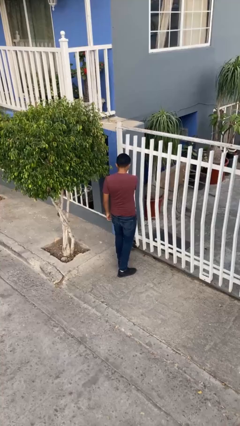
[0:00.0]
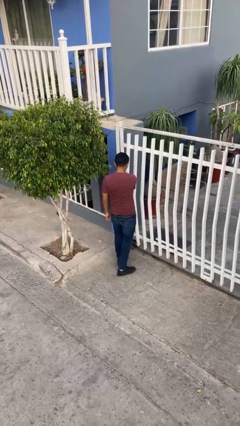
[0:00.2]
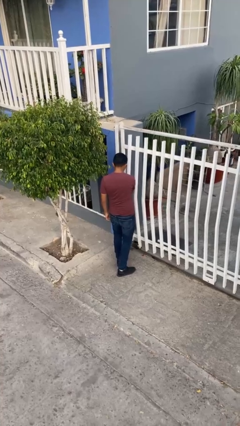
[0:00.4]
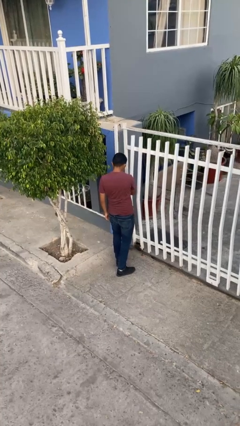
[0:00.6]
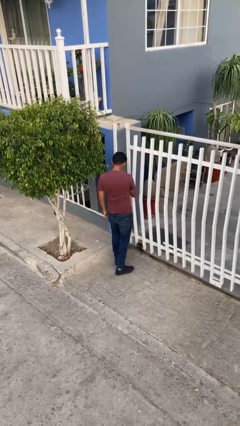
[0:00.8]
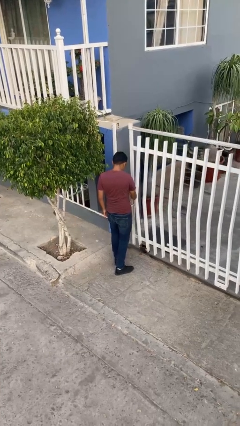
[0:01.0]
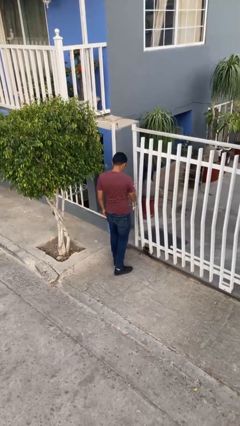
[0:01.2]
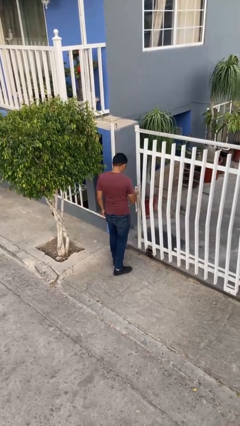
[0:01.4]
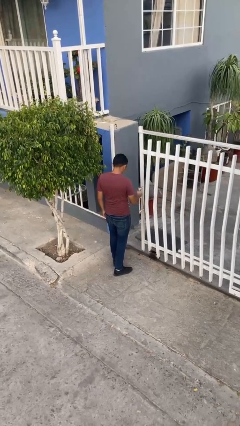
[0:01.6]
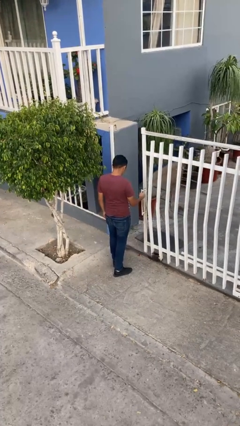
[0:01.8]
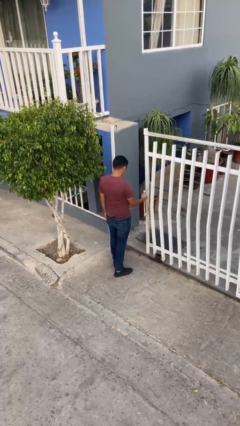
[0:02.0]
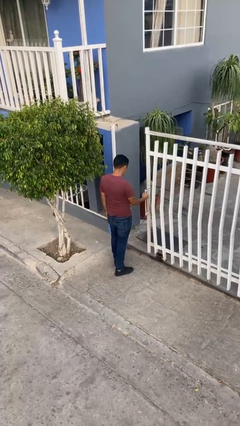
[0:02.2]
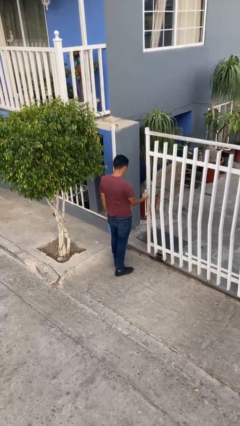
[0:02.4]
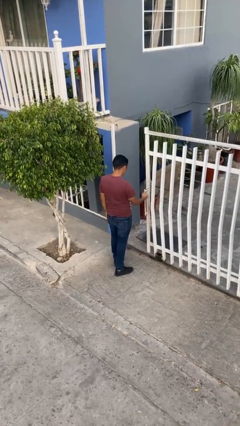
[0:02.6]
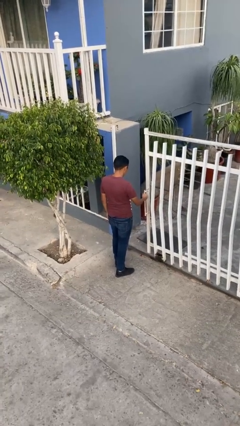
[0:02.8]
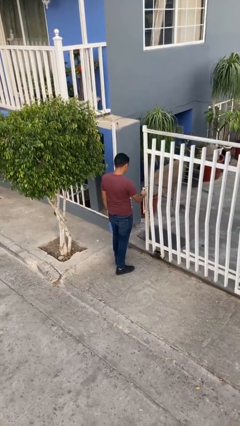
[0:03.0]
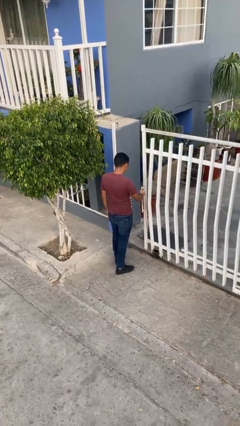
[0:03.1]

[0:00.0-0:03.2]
person opens facility door

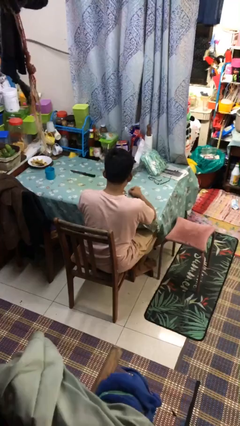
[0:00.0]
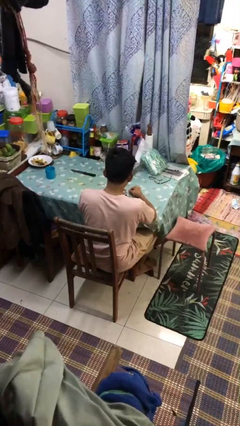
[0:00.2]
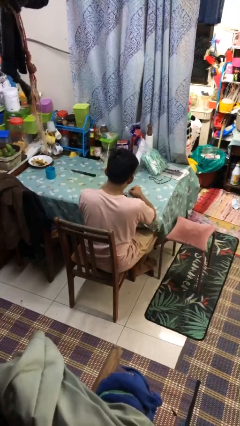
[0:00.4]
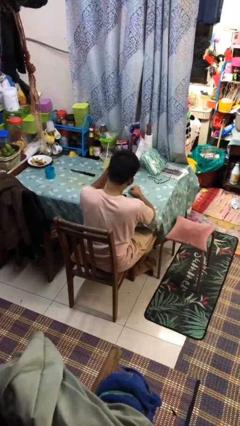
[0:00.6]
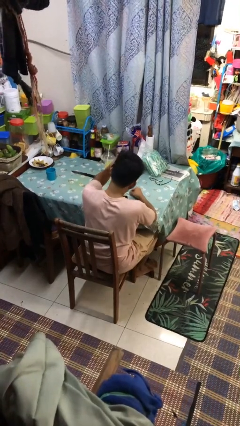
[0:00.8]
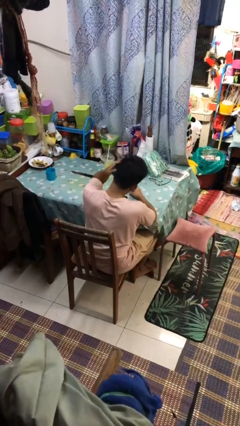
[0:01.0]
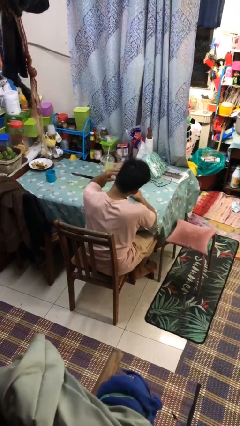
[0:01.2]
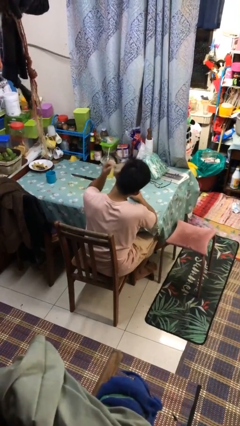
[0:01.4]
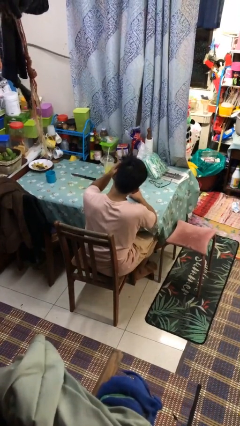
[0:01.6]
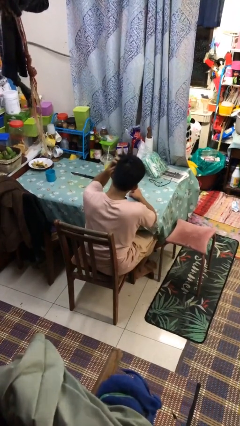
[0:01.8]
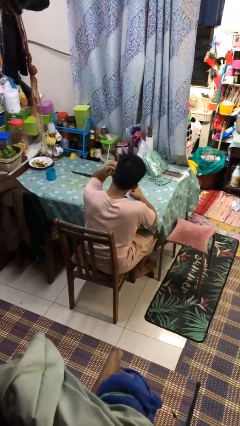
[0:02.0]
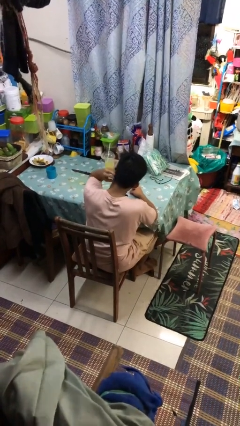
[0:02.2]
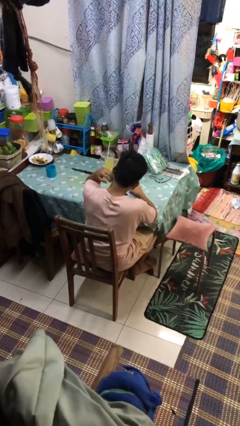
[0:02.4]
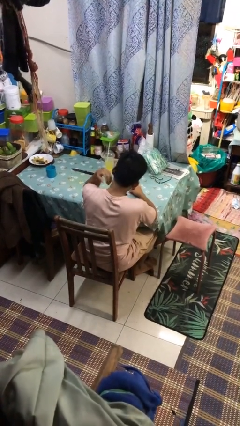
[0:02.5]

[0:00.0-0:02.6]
person strokes hair

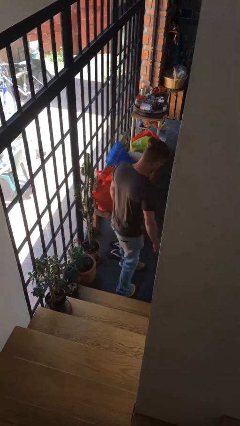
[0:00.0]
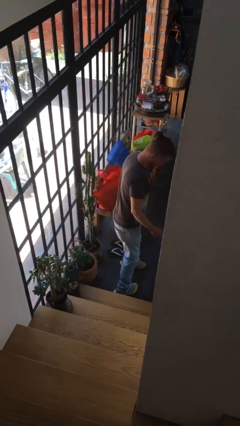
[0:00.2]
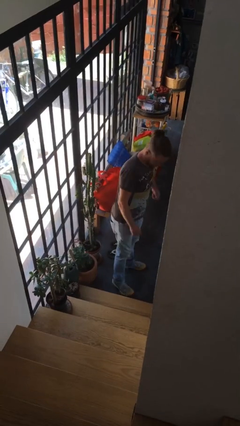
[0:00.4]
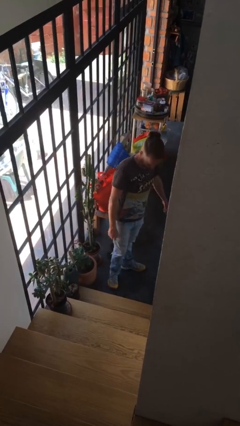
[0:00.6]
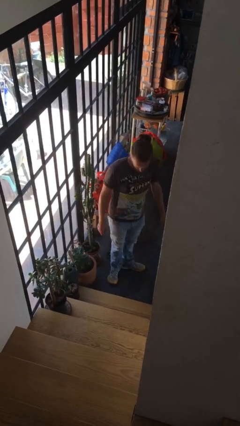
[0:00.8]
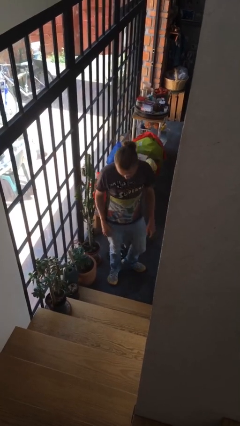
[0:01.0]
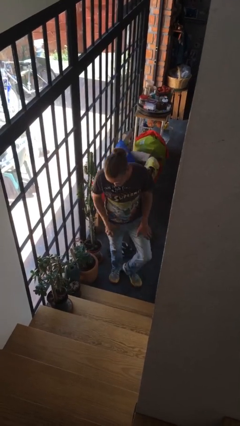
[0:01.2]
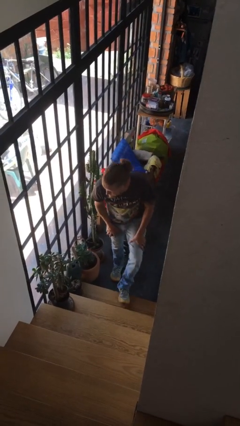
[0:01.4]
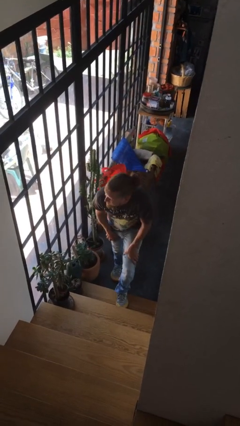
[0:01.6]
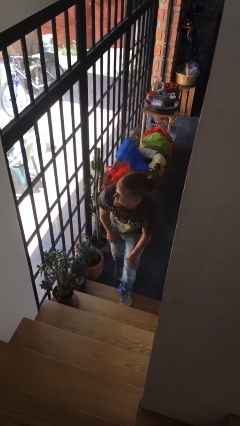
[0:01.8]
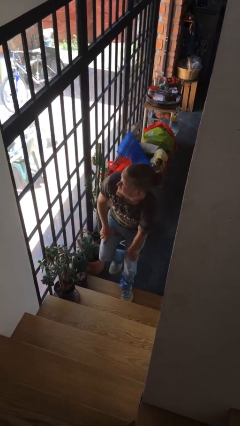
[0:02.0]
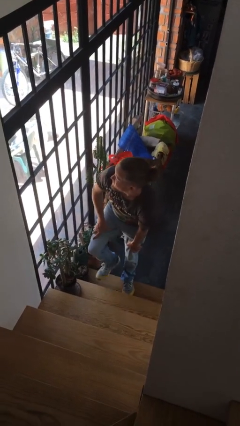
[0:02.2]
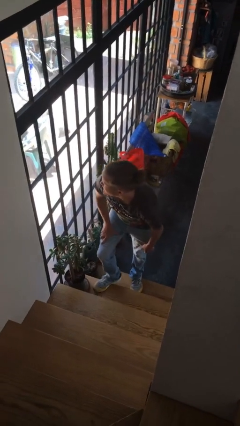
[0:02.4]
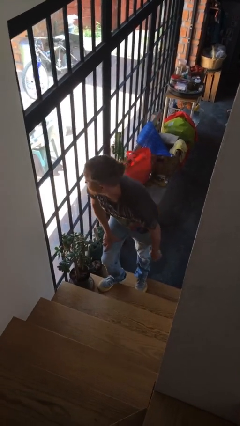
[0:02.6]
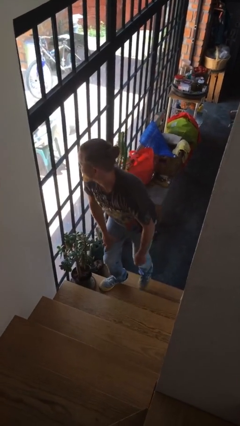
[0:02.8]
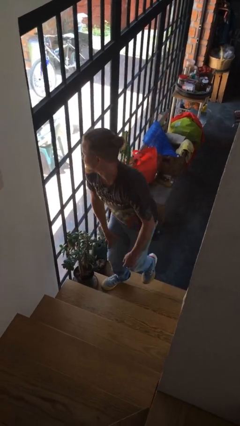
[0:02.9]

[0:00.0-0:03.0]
person climbs up stairs

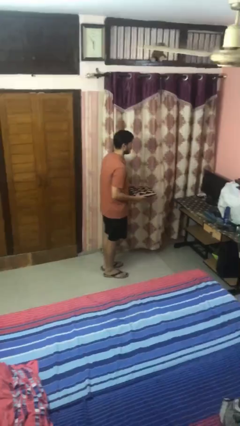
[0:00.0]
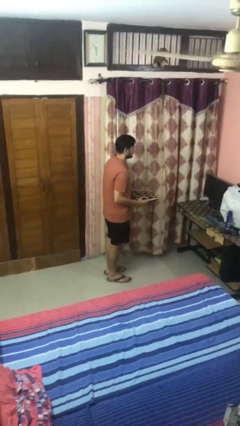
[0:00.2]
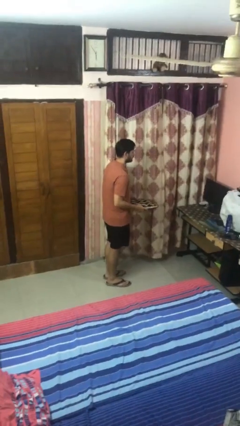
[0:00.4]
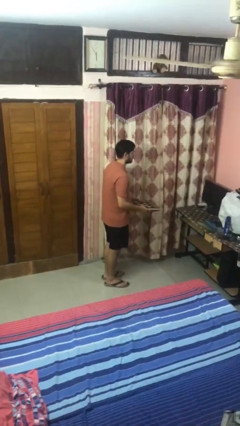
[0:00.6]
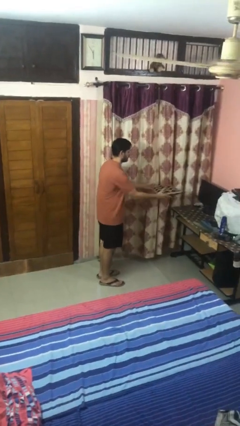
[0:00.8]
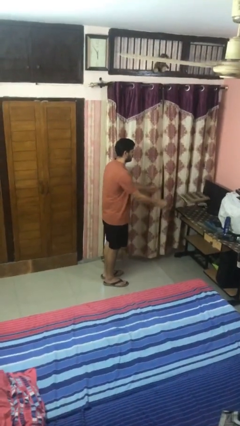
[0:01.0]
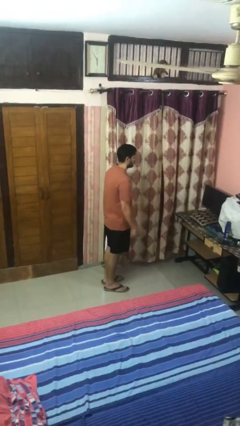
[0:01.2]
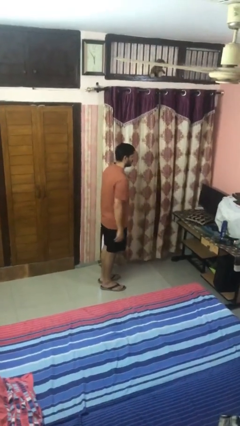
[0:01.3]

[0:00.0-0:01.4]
person throws object on table

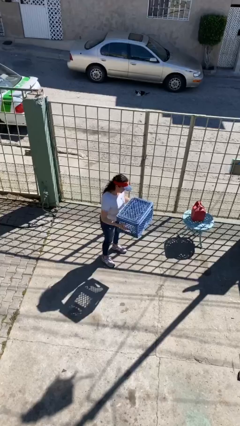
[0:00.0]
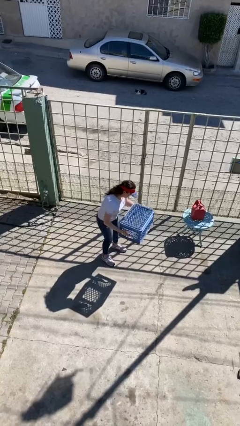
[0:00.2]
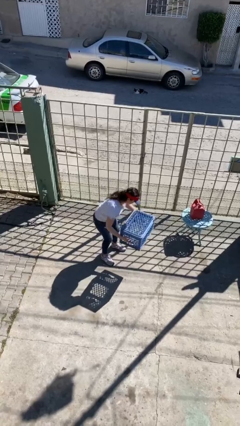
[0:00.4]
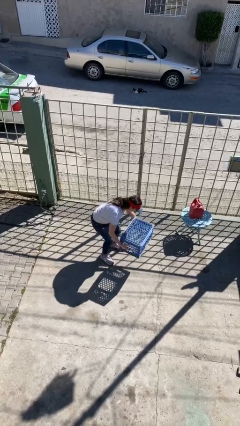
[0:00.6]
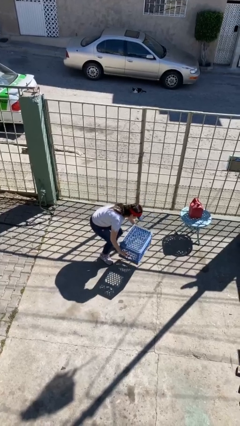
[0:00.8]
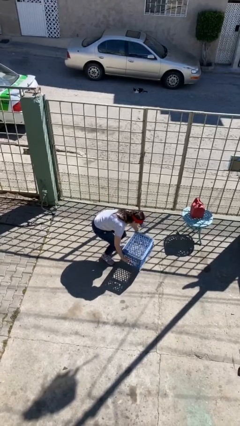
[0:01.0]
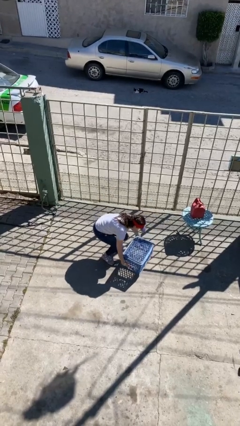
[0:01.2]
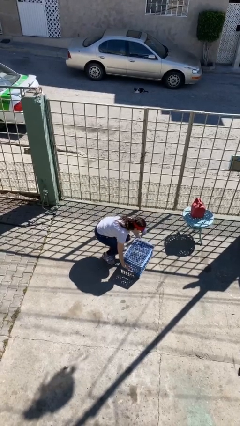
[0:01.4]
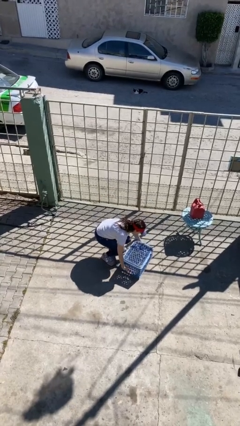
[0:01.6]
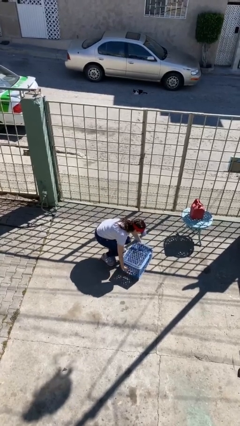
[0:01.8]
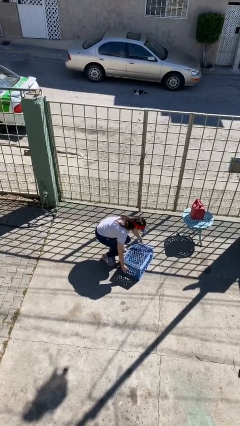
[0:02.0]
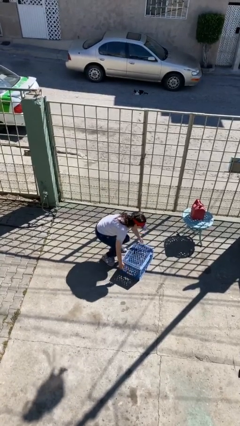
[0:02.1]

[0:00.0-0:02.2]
person puts down object on floor

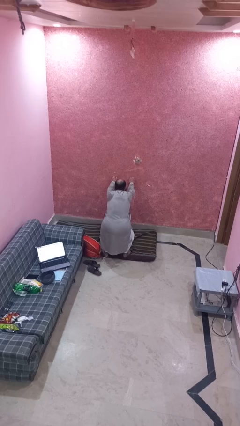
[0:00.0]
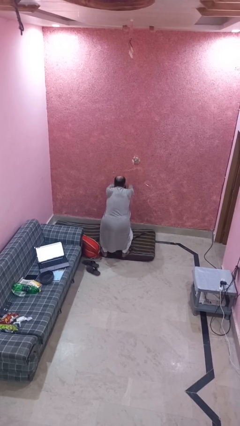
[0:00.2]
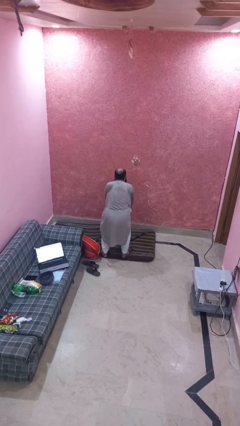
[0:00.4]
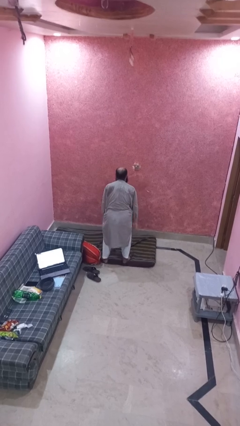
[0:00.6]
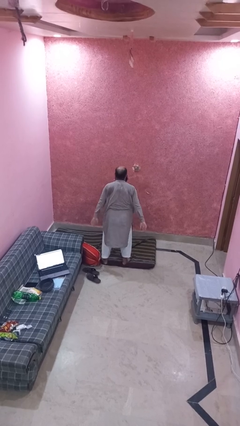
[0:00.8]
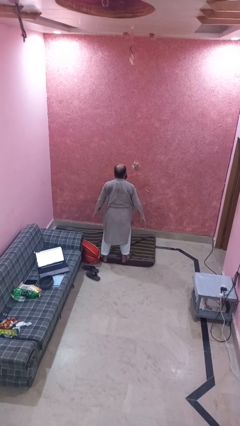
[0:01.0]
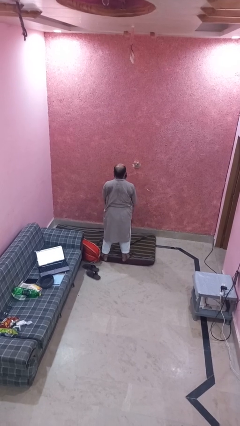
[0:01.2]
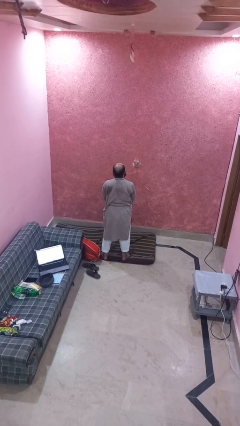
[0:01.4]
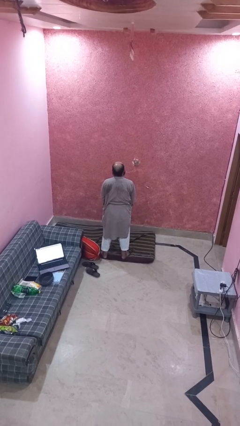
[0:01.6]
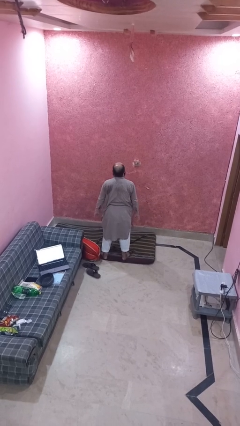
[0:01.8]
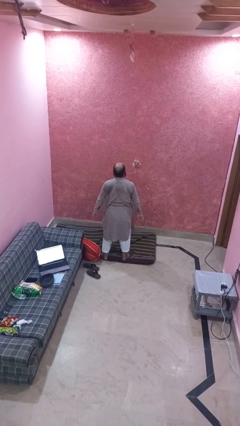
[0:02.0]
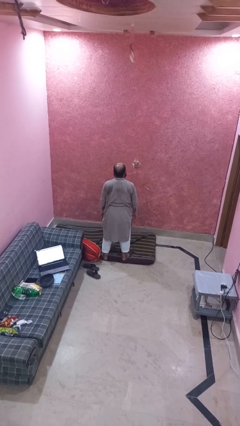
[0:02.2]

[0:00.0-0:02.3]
person stands up

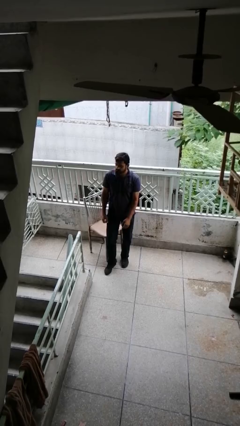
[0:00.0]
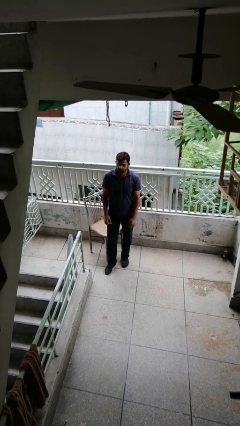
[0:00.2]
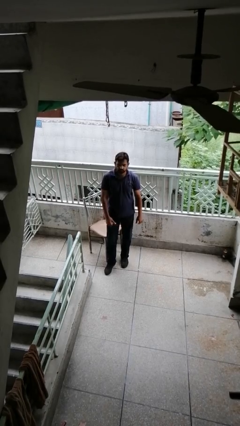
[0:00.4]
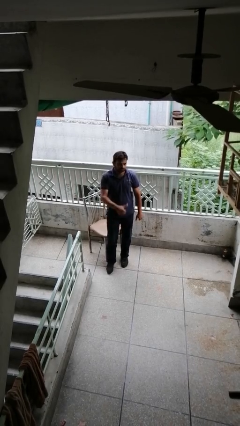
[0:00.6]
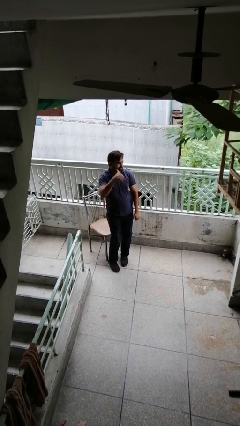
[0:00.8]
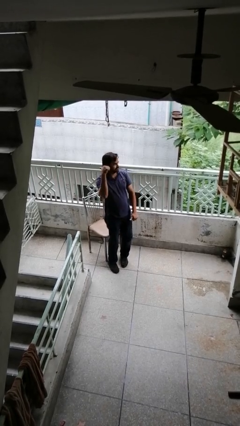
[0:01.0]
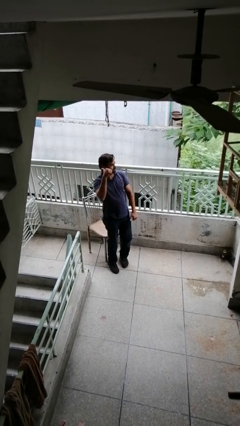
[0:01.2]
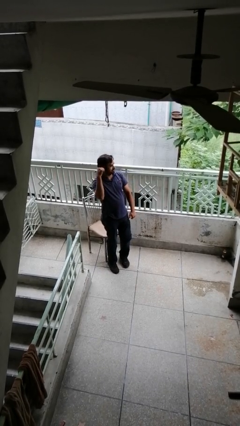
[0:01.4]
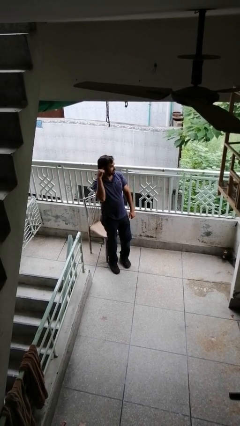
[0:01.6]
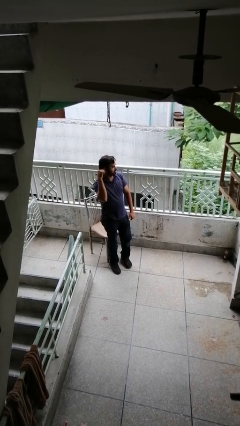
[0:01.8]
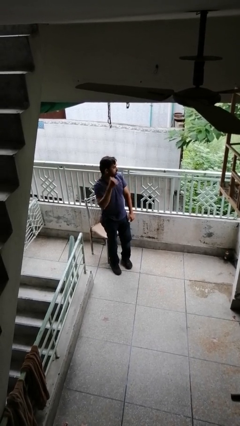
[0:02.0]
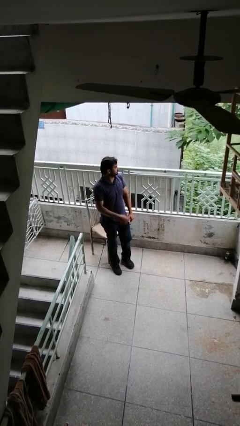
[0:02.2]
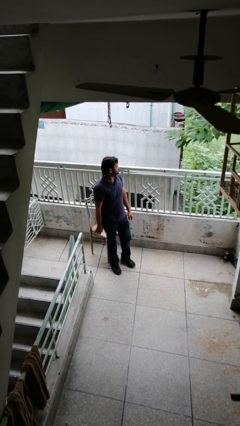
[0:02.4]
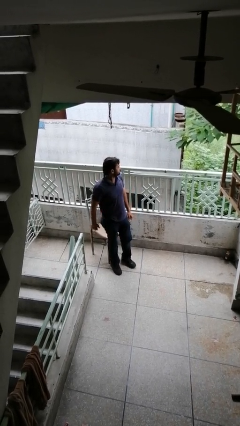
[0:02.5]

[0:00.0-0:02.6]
person gestures behind me
